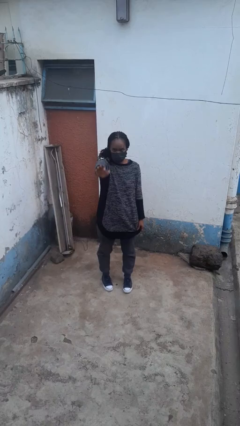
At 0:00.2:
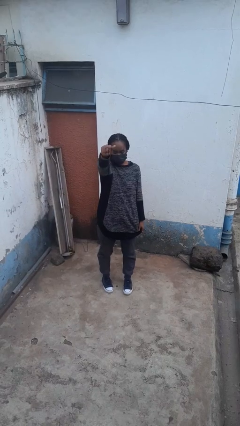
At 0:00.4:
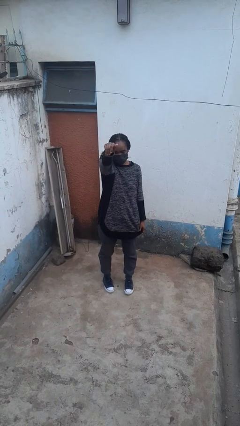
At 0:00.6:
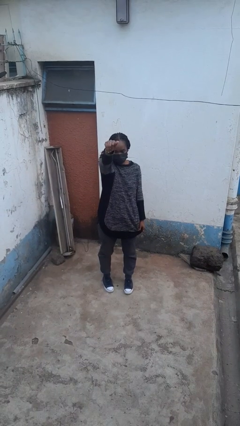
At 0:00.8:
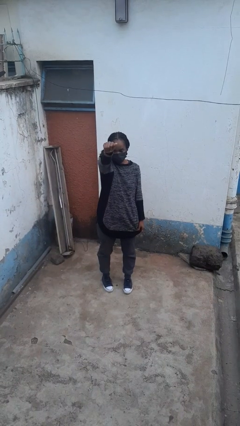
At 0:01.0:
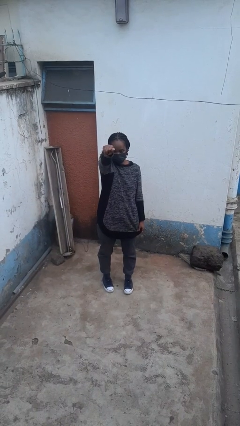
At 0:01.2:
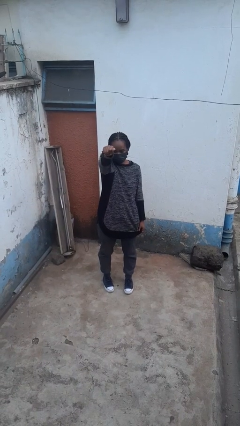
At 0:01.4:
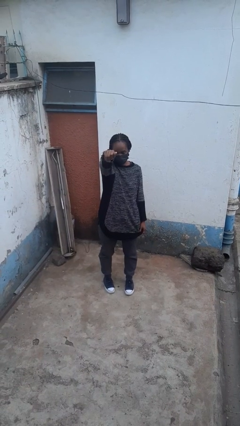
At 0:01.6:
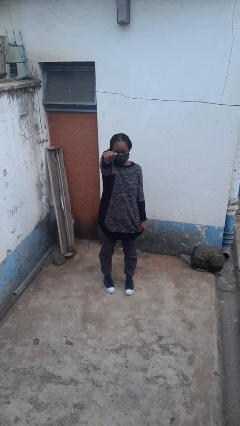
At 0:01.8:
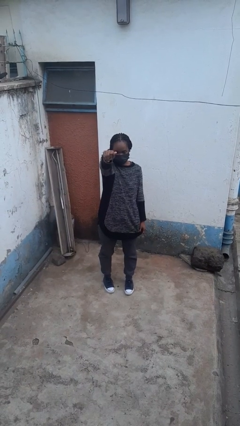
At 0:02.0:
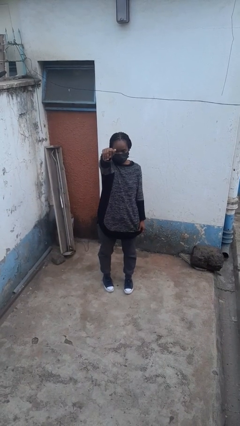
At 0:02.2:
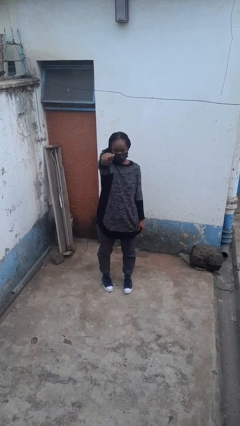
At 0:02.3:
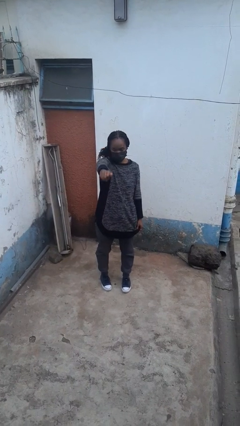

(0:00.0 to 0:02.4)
person gestures come here

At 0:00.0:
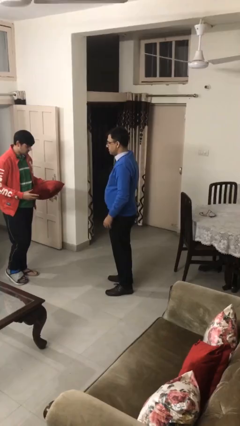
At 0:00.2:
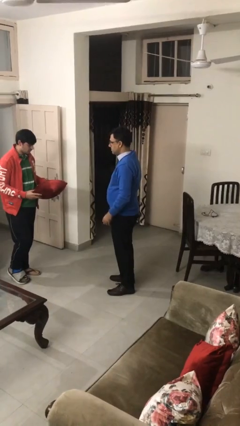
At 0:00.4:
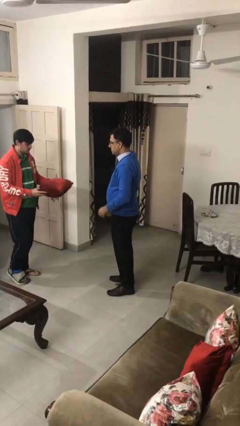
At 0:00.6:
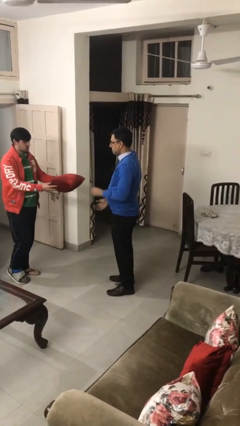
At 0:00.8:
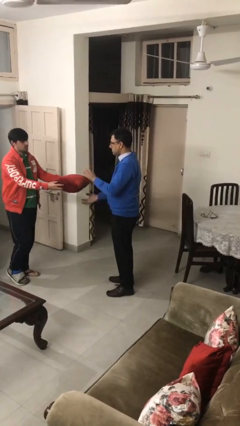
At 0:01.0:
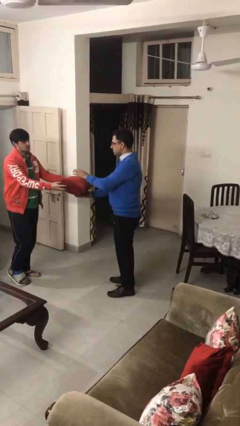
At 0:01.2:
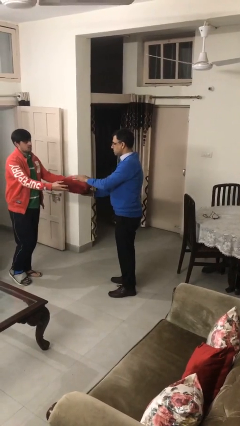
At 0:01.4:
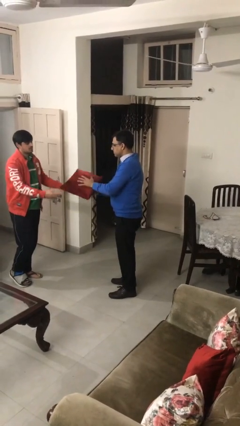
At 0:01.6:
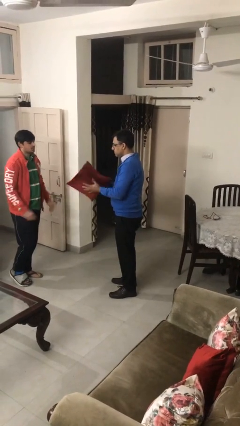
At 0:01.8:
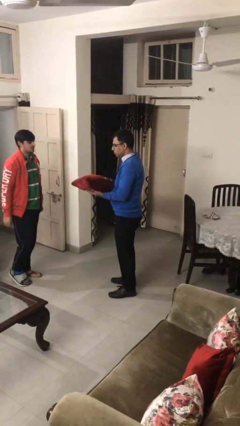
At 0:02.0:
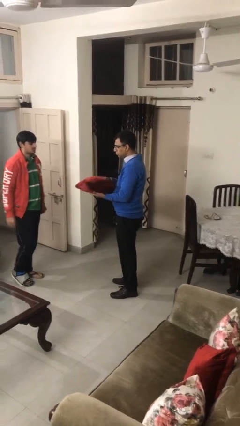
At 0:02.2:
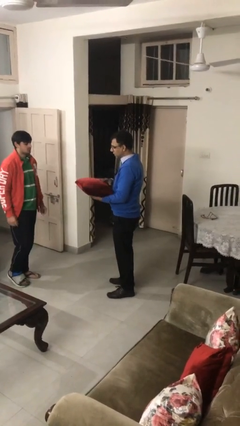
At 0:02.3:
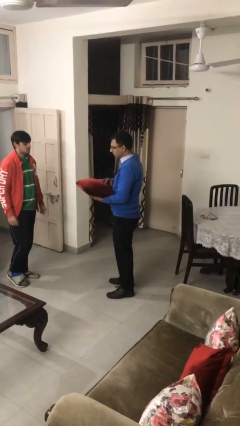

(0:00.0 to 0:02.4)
person transfers object to person

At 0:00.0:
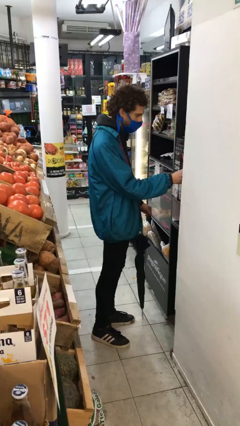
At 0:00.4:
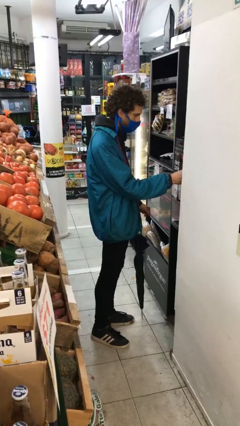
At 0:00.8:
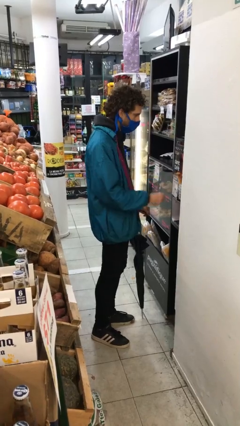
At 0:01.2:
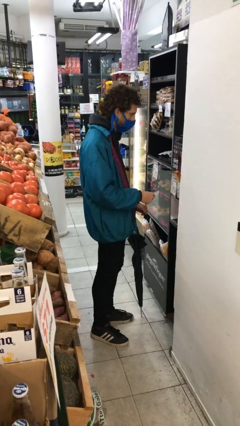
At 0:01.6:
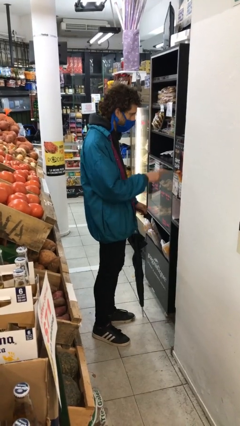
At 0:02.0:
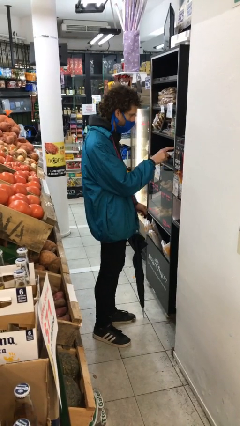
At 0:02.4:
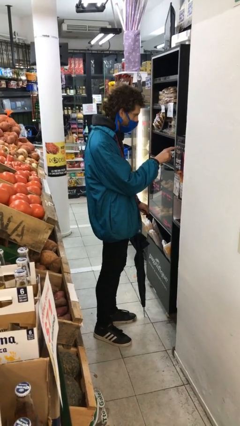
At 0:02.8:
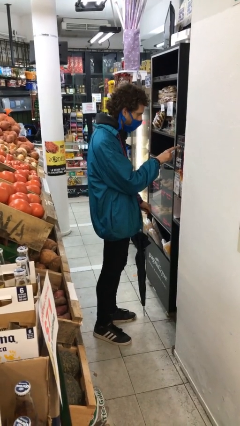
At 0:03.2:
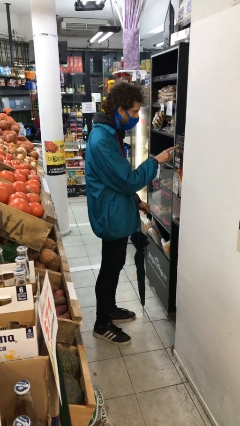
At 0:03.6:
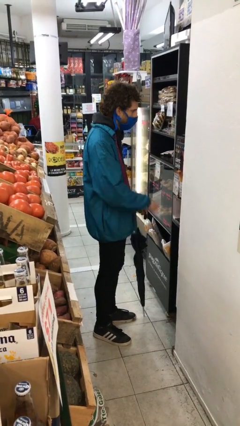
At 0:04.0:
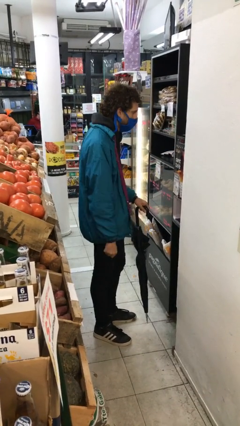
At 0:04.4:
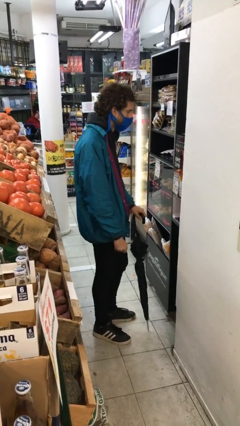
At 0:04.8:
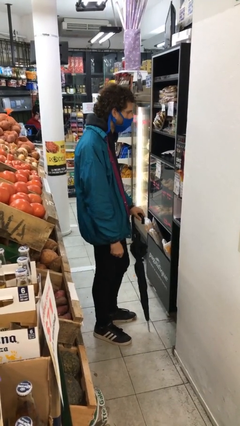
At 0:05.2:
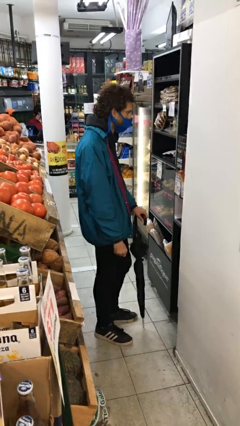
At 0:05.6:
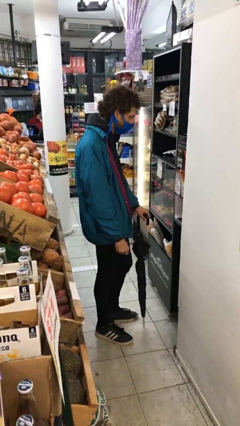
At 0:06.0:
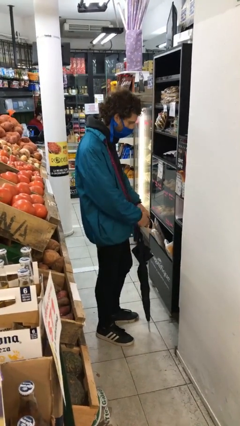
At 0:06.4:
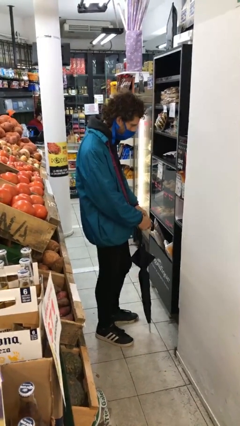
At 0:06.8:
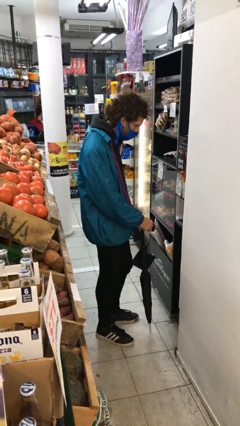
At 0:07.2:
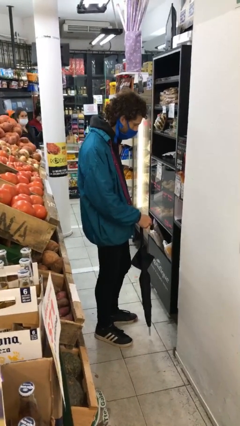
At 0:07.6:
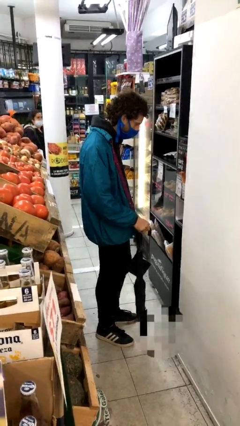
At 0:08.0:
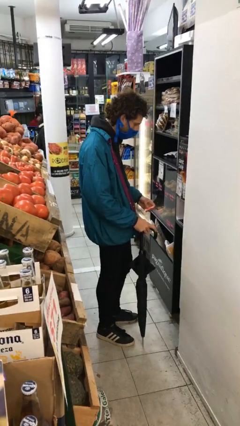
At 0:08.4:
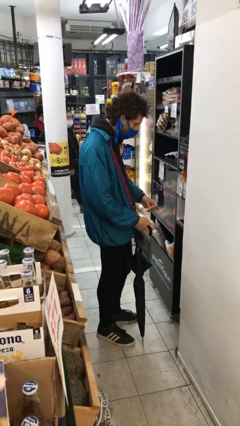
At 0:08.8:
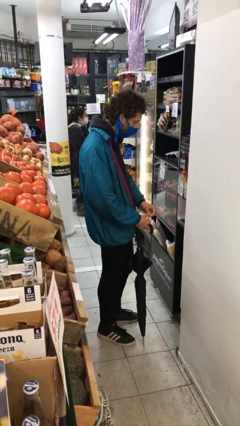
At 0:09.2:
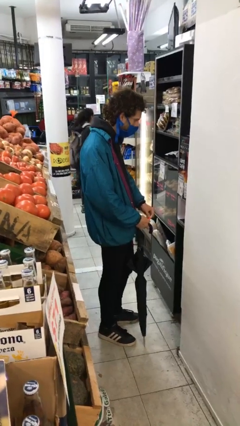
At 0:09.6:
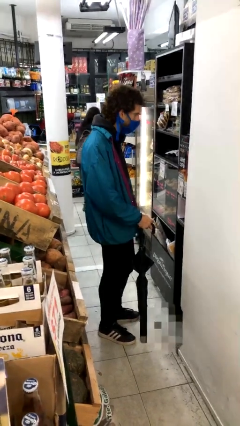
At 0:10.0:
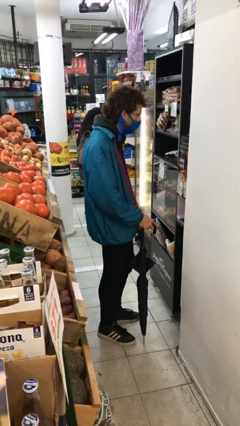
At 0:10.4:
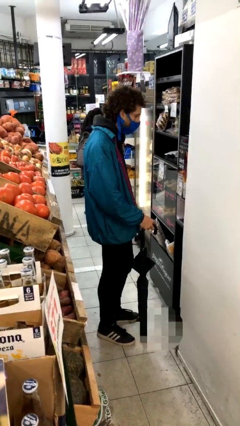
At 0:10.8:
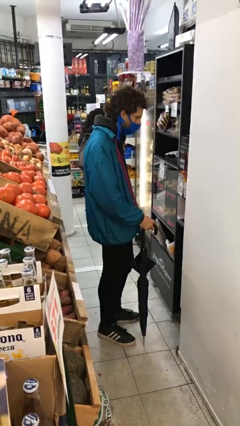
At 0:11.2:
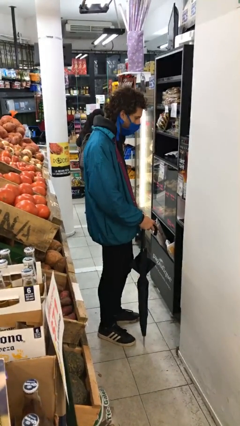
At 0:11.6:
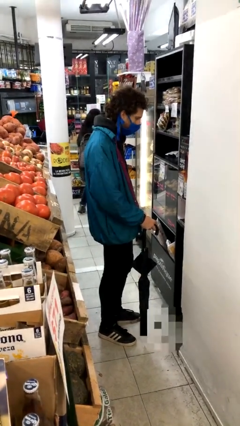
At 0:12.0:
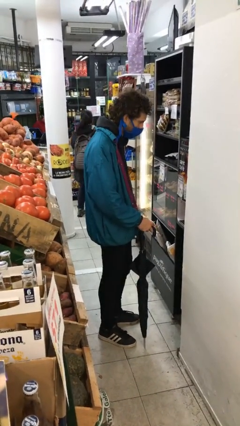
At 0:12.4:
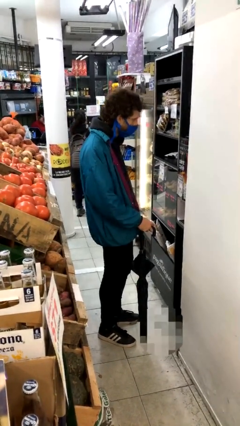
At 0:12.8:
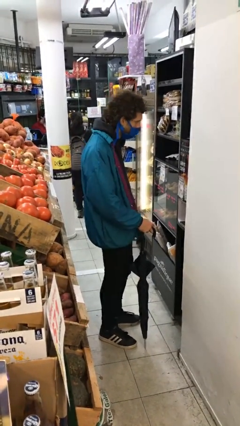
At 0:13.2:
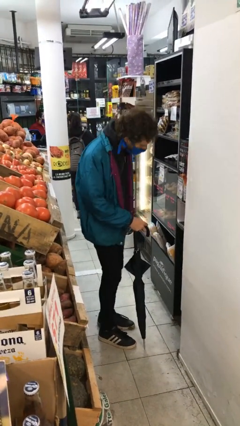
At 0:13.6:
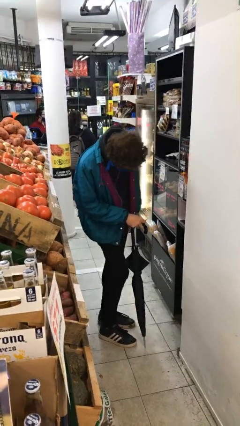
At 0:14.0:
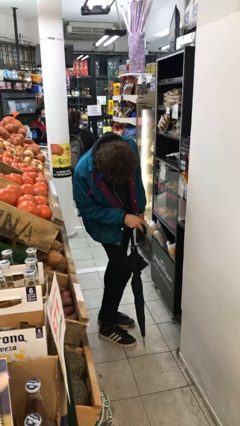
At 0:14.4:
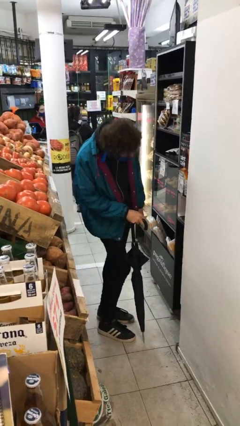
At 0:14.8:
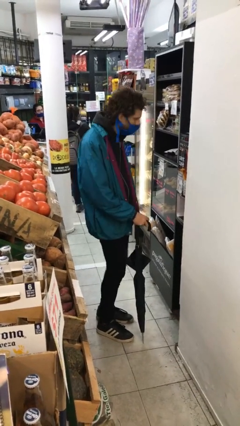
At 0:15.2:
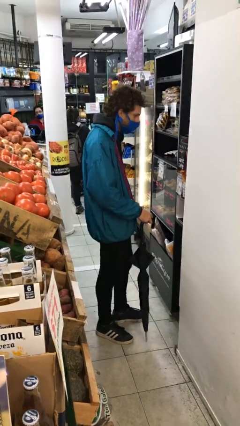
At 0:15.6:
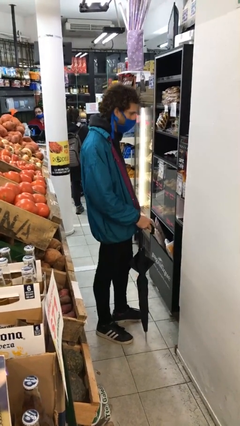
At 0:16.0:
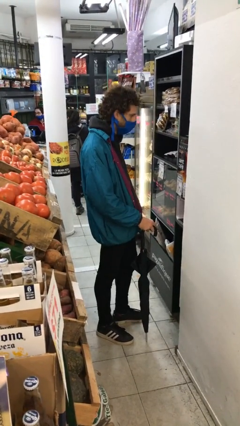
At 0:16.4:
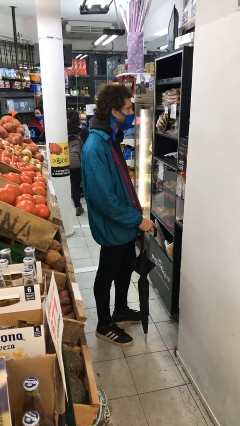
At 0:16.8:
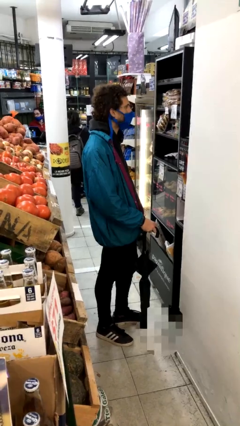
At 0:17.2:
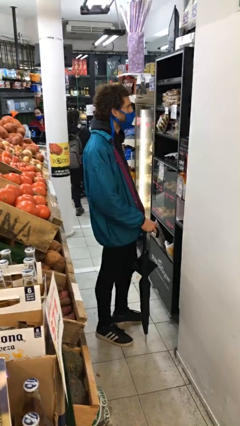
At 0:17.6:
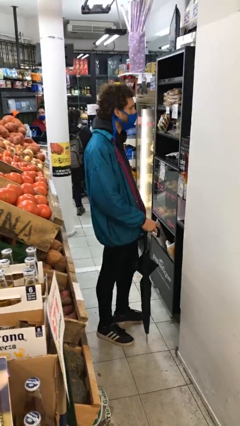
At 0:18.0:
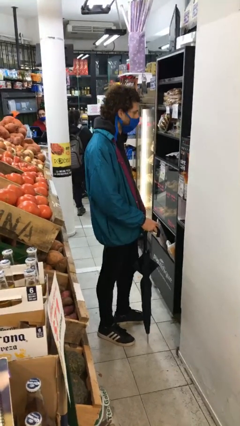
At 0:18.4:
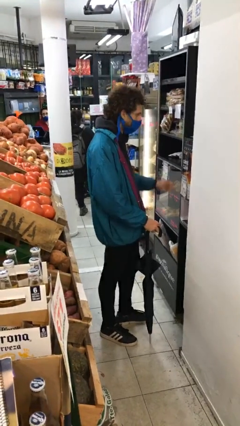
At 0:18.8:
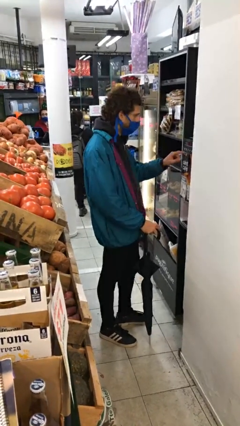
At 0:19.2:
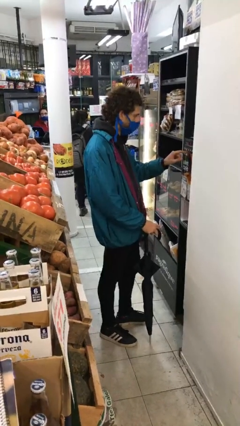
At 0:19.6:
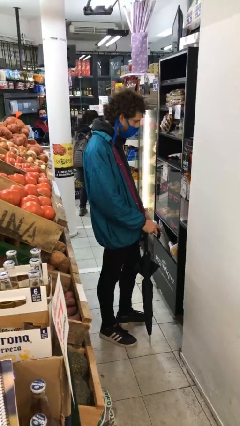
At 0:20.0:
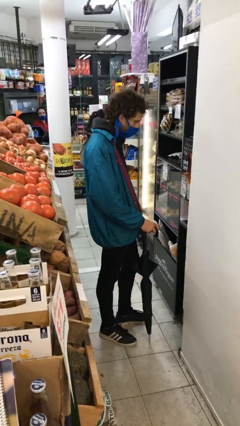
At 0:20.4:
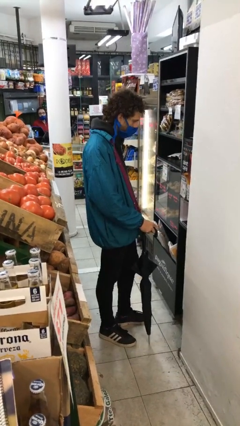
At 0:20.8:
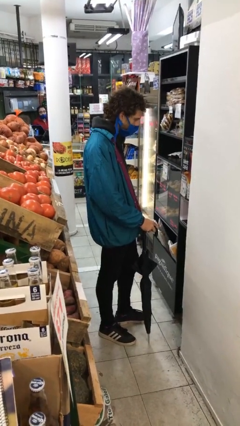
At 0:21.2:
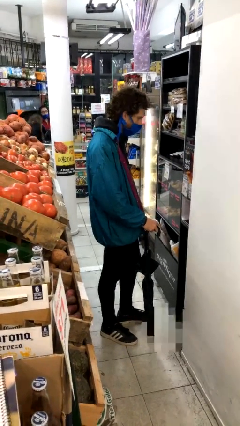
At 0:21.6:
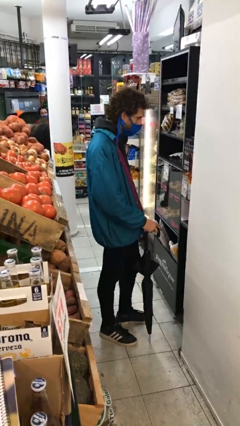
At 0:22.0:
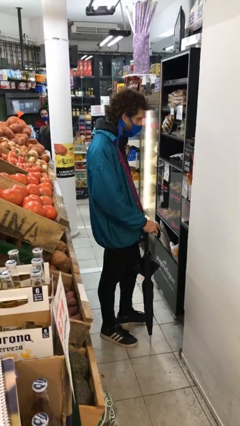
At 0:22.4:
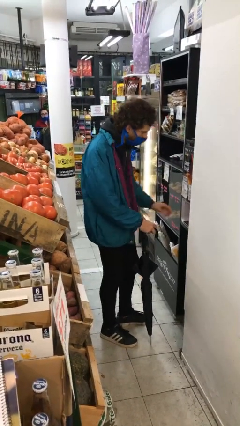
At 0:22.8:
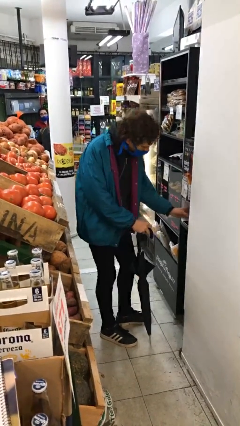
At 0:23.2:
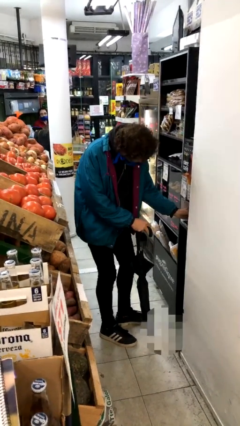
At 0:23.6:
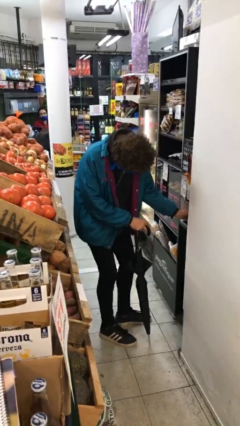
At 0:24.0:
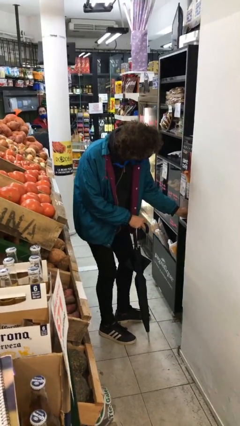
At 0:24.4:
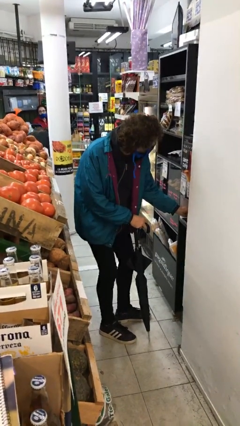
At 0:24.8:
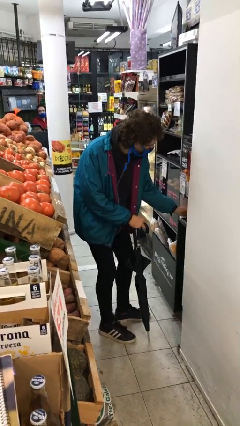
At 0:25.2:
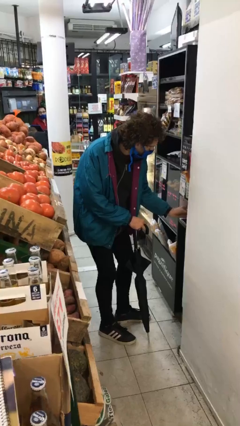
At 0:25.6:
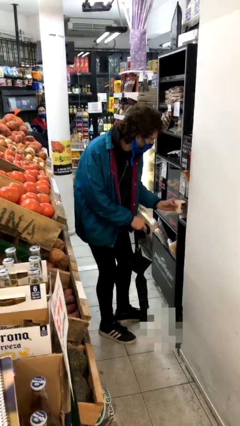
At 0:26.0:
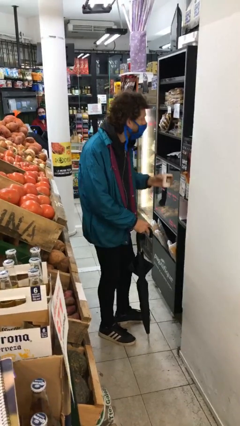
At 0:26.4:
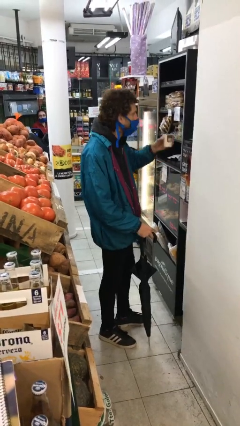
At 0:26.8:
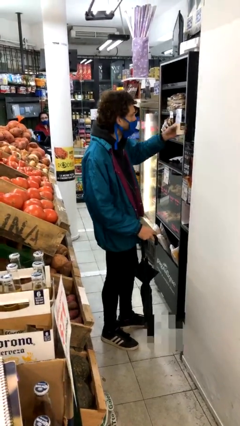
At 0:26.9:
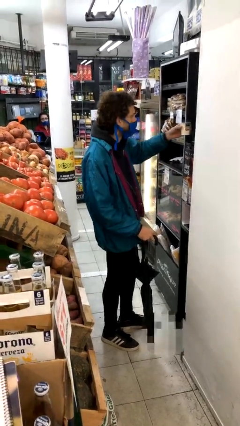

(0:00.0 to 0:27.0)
person purchases from machine
